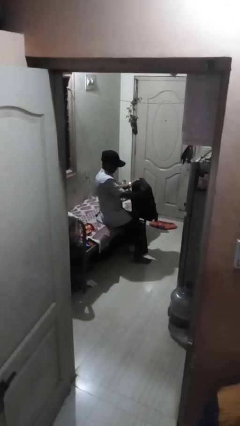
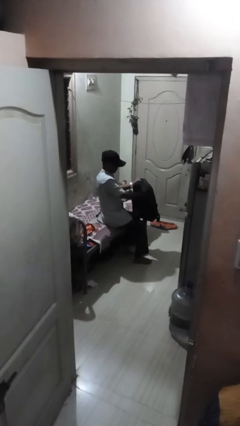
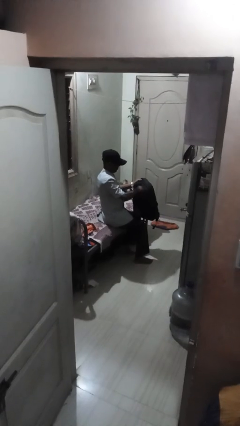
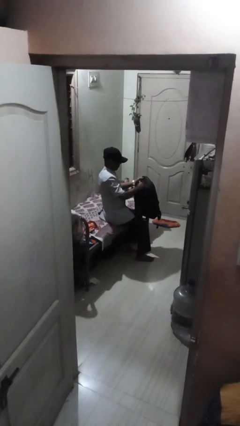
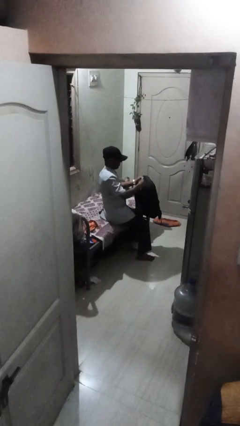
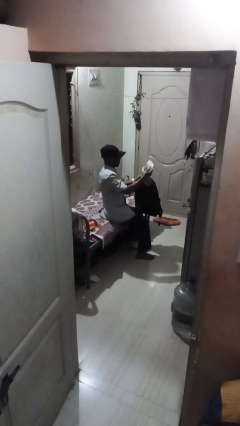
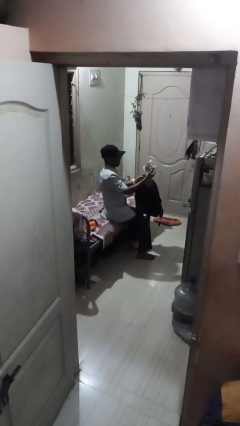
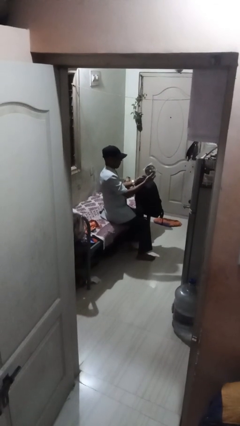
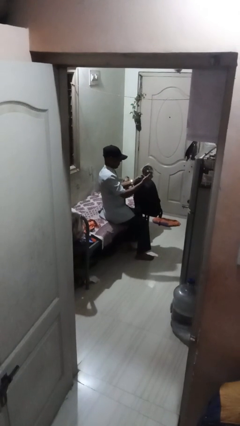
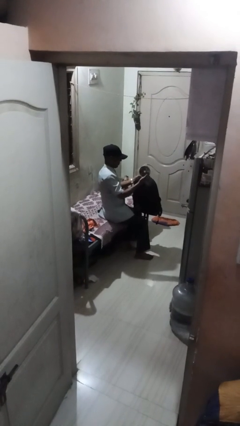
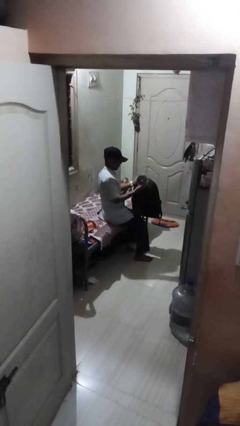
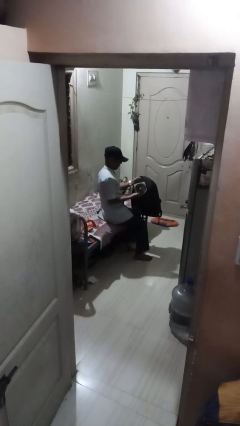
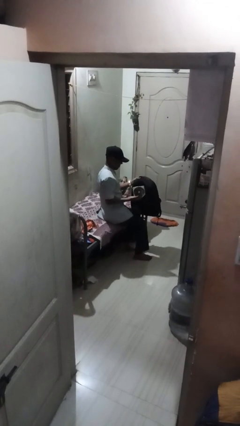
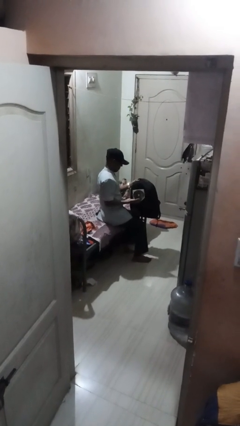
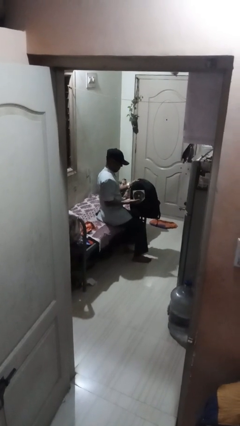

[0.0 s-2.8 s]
person takes object from backpack

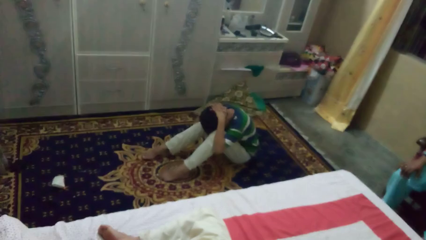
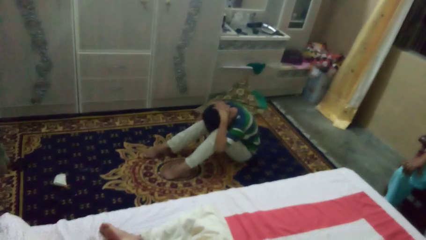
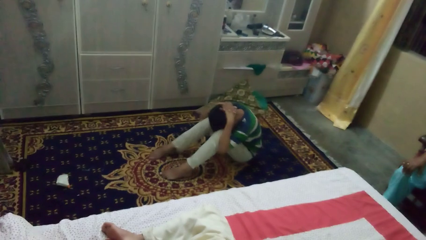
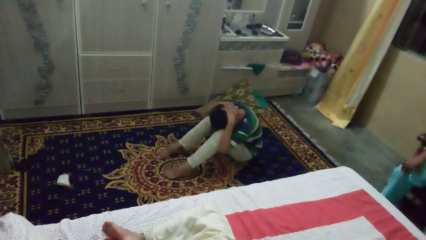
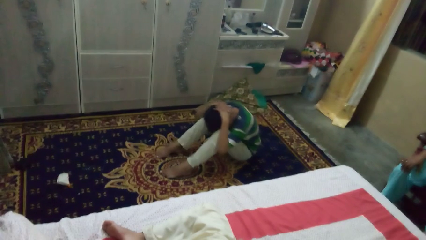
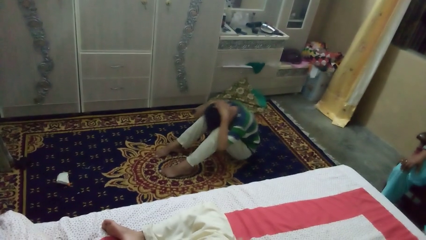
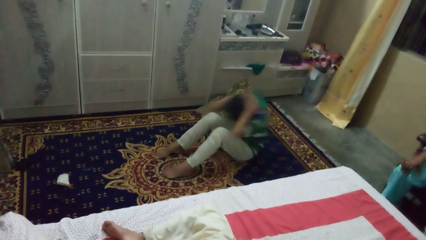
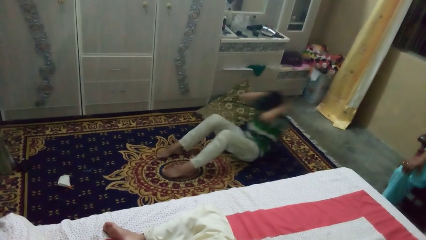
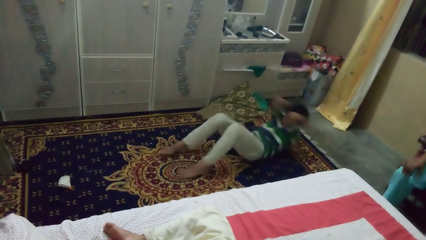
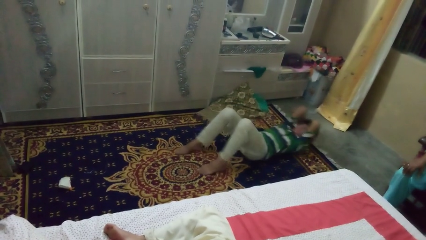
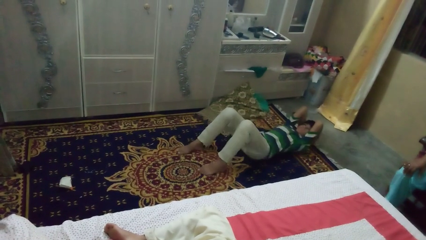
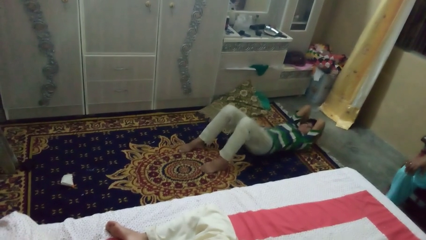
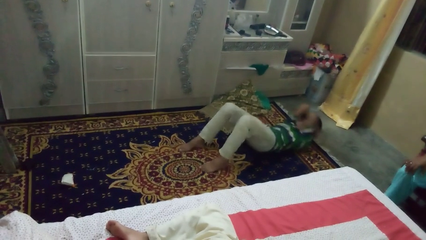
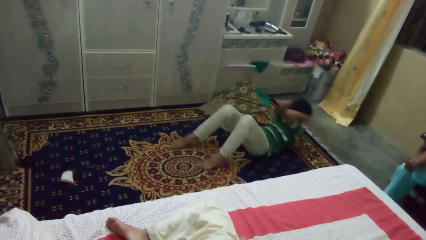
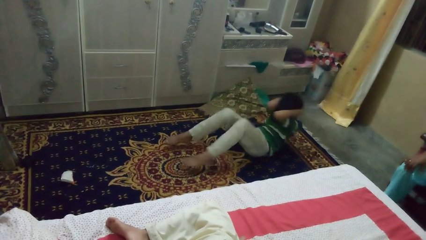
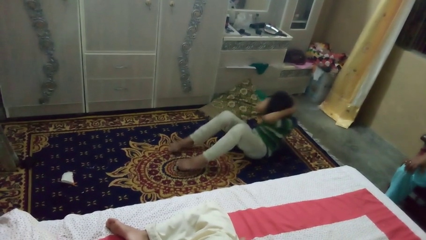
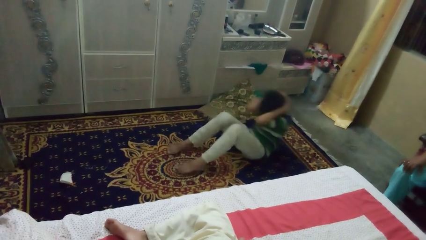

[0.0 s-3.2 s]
person exercises with situp

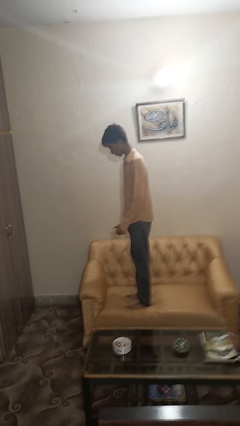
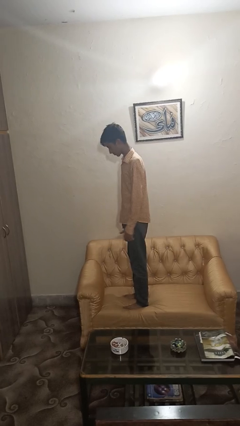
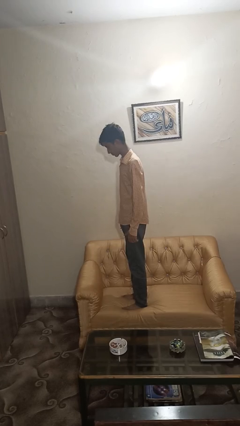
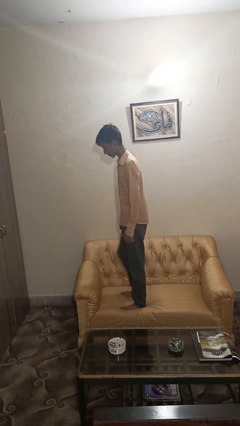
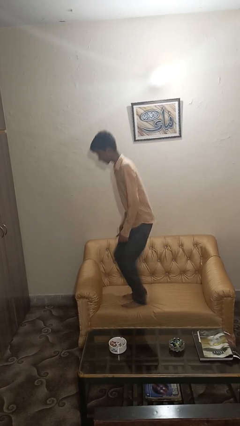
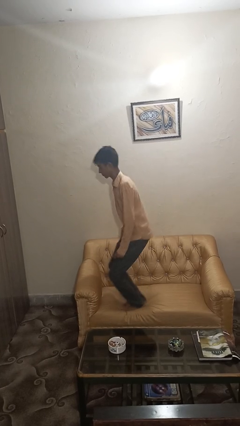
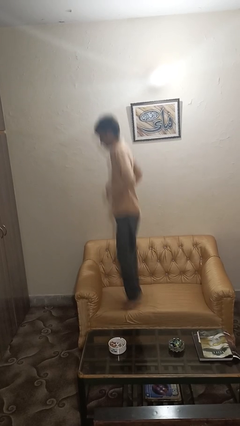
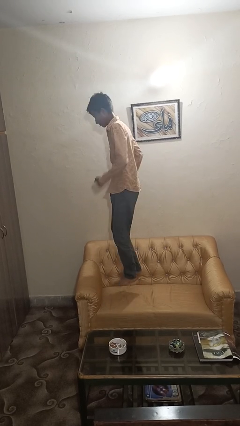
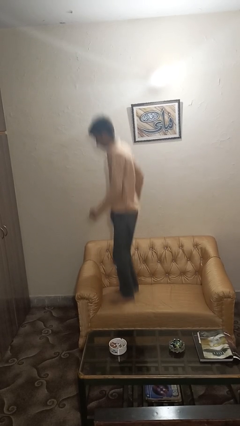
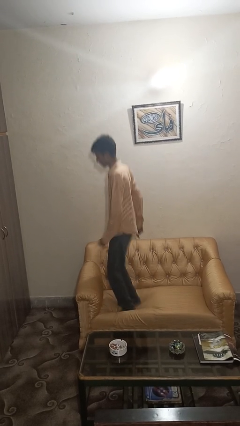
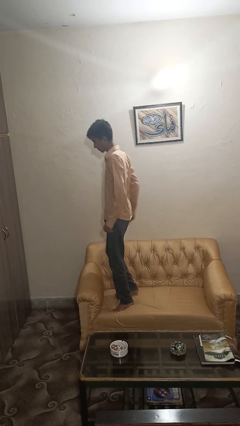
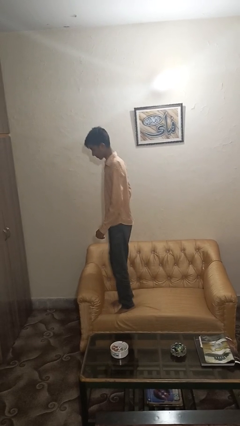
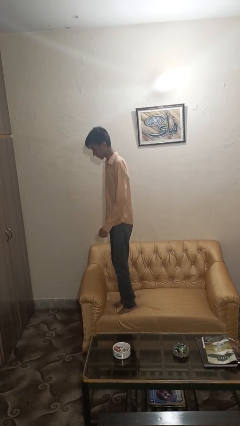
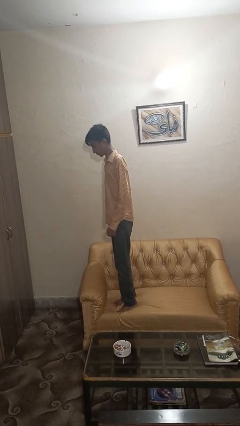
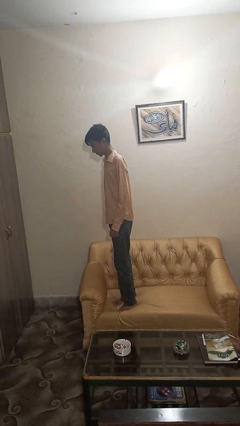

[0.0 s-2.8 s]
person jumps on couch

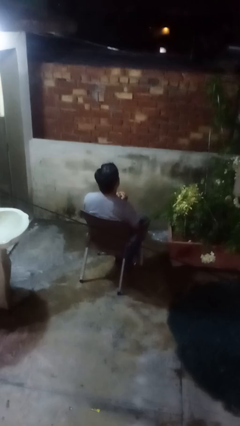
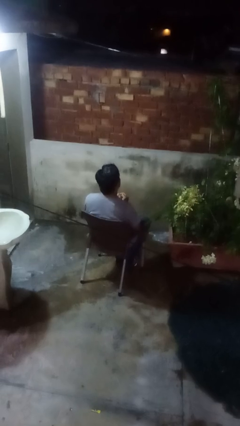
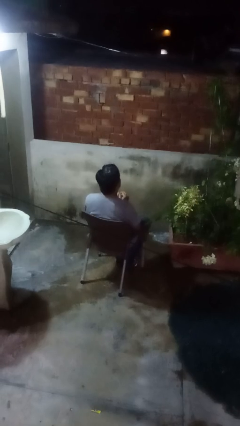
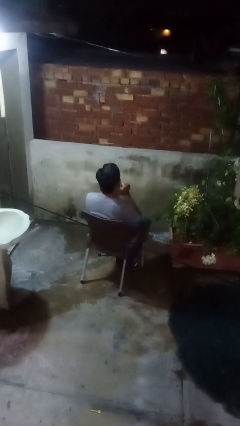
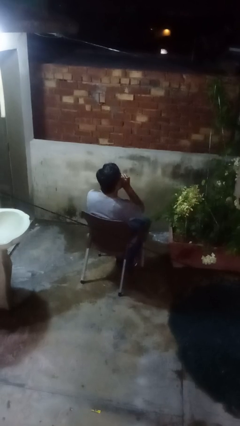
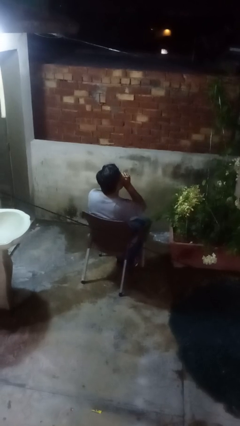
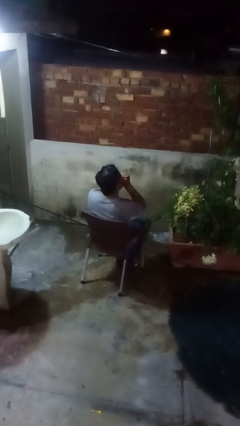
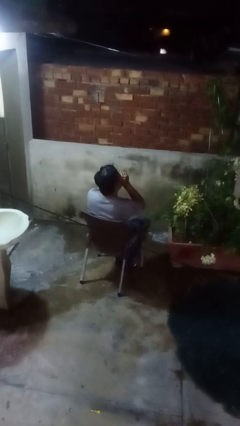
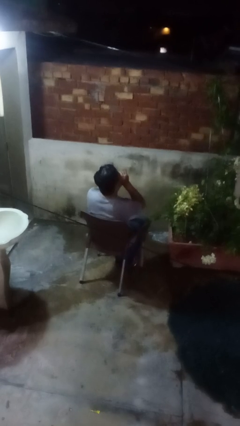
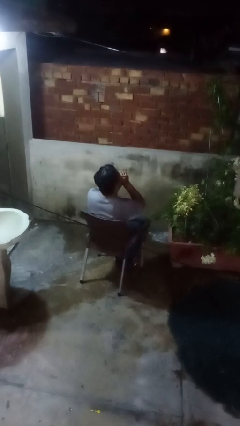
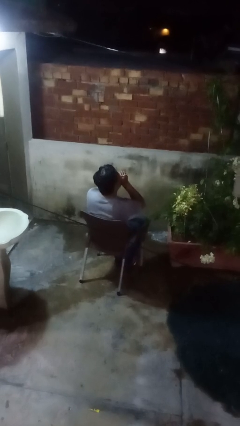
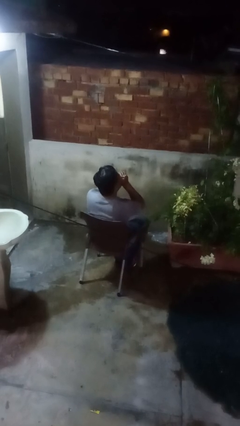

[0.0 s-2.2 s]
person blows into hands

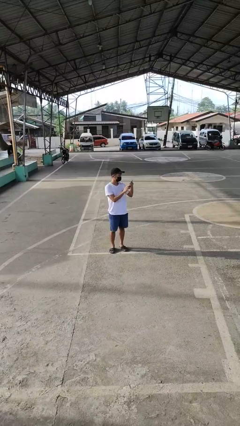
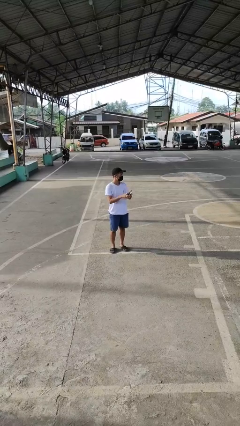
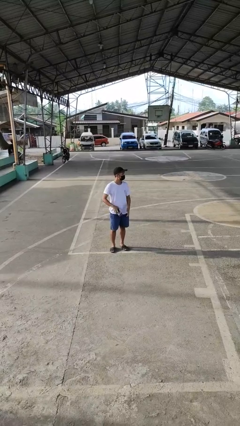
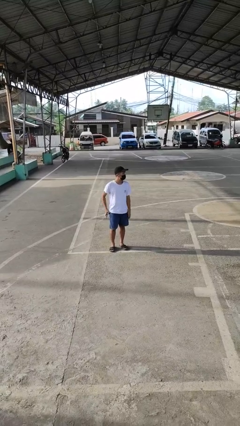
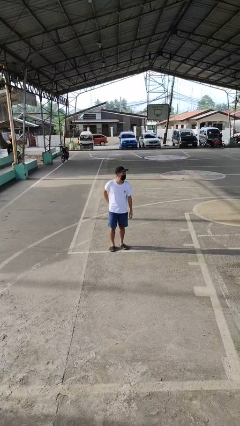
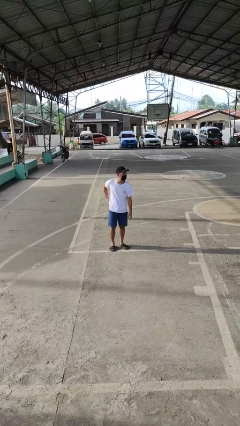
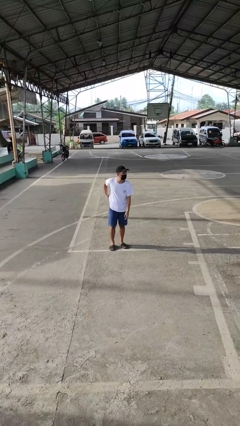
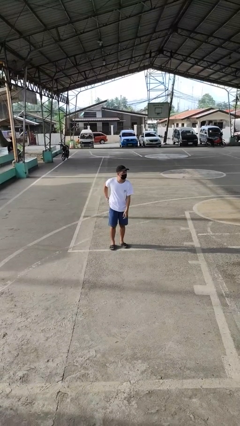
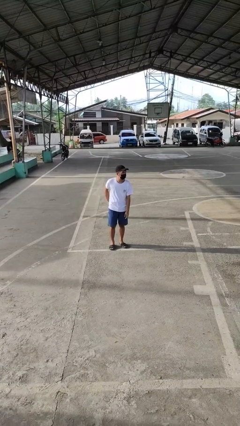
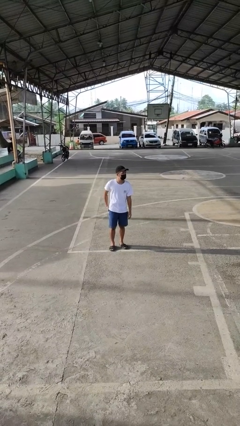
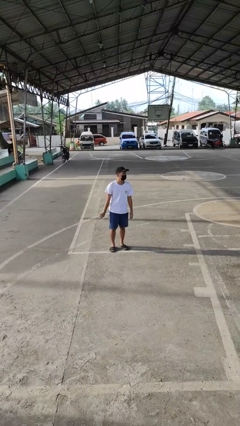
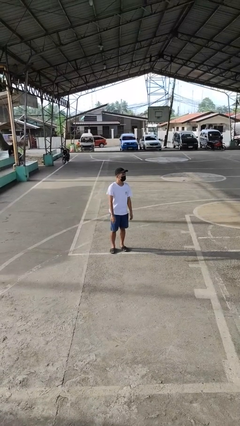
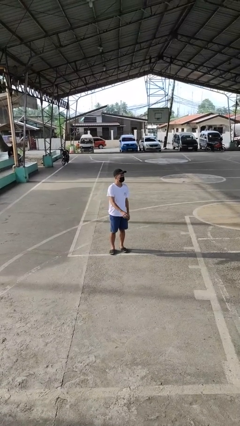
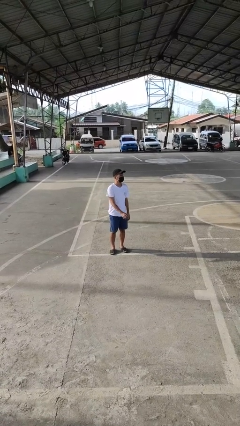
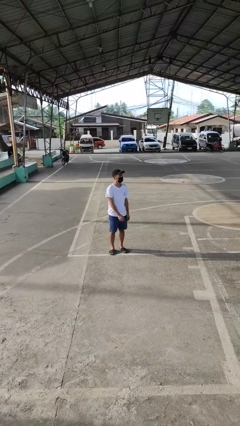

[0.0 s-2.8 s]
person puts phone into pocket

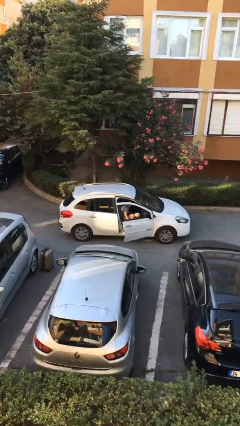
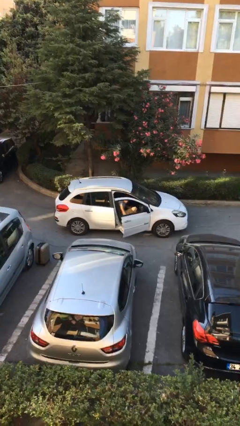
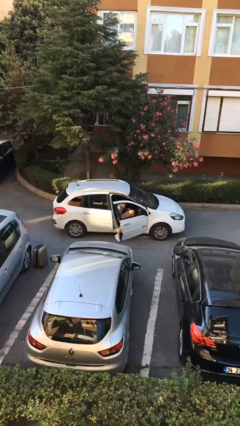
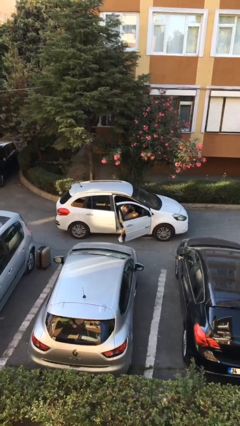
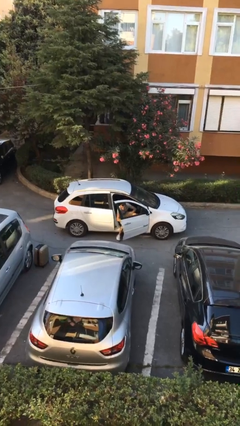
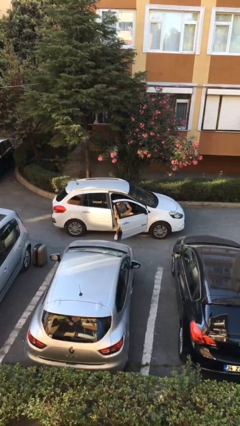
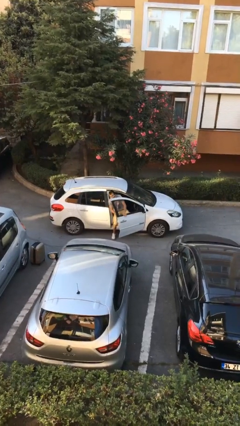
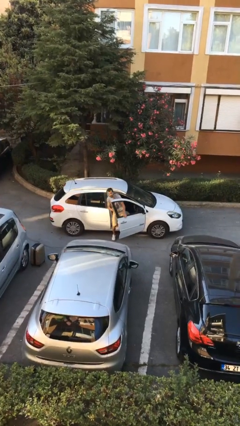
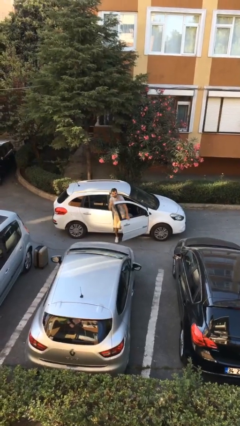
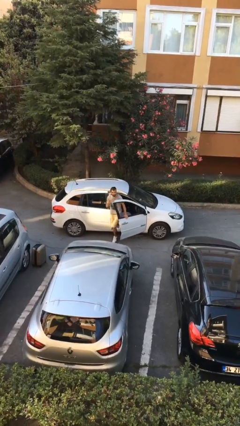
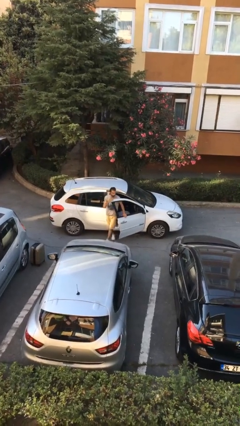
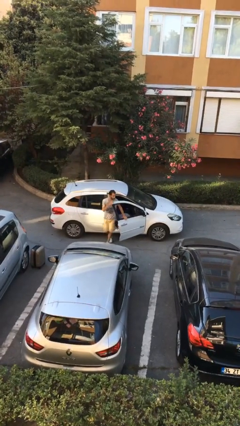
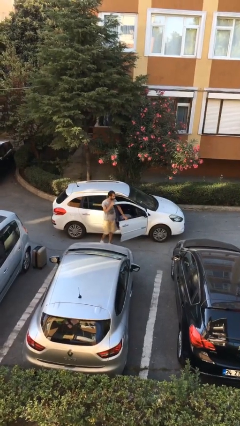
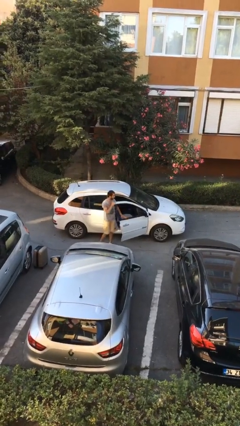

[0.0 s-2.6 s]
person exits car

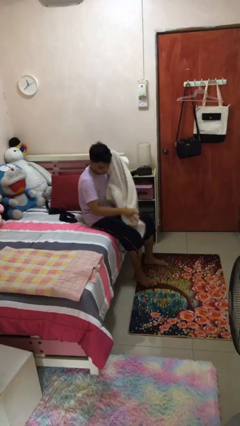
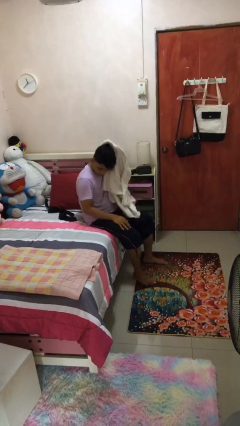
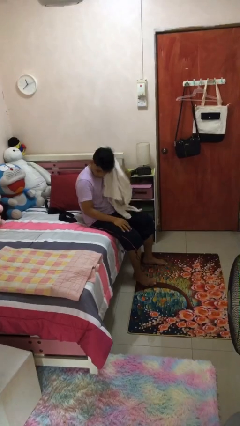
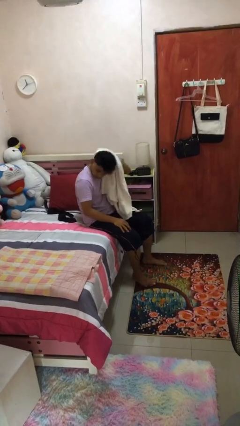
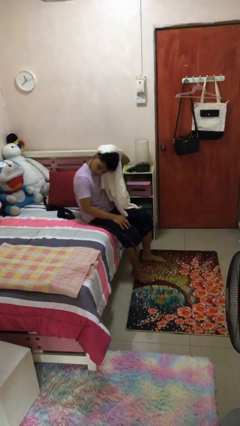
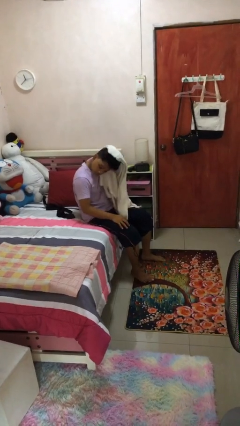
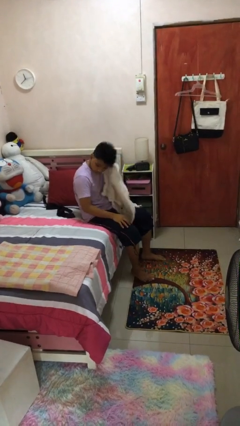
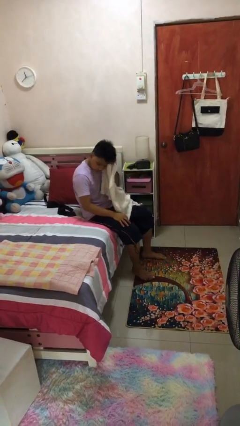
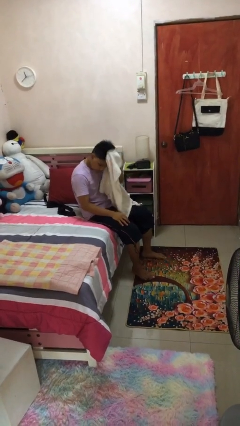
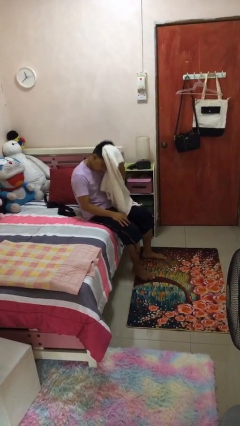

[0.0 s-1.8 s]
person dries hair with towel
